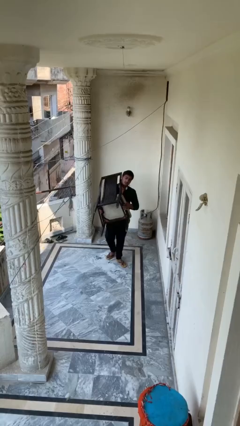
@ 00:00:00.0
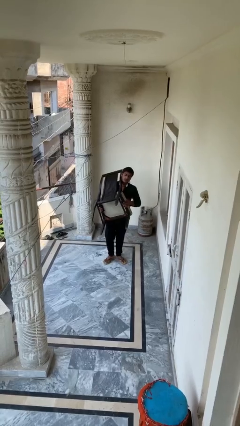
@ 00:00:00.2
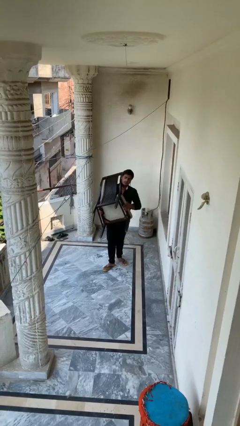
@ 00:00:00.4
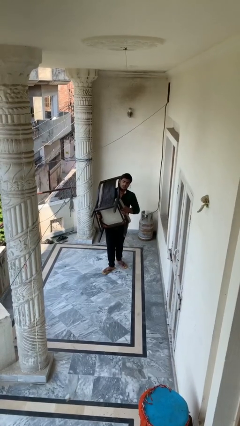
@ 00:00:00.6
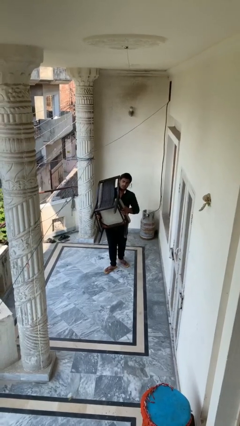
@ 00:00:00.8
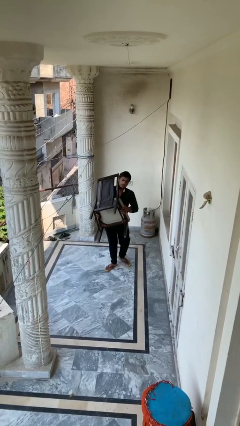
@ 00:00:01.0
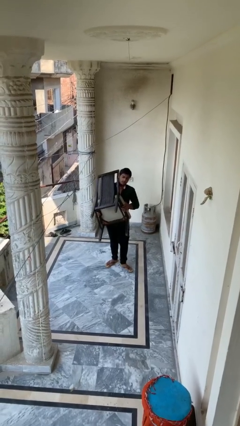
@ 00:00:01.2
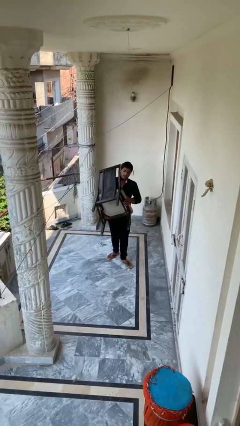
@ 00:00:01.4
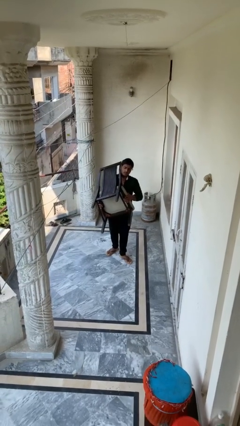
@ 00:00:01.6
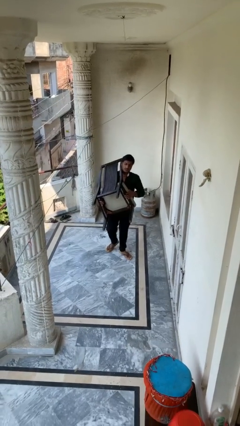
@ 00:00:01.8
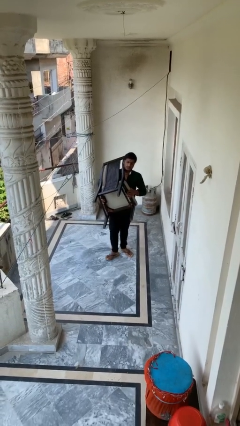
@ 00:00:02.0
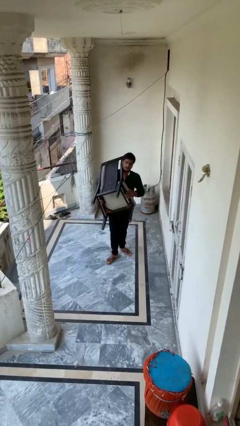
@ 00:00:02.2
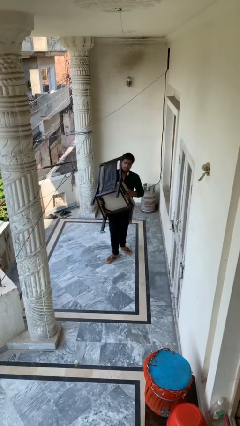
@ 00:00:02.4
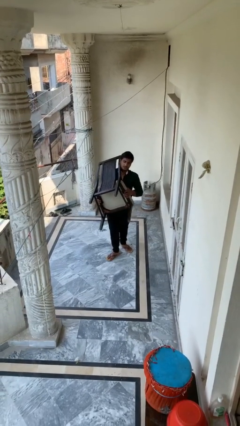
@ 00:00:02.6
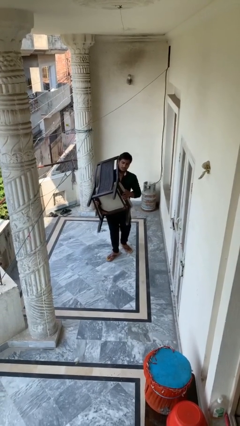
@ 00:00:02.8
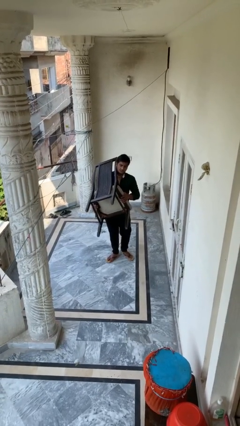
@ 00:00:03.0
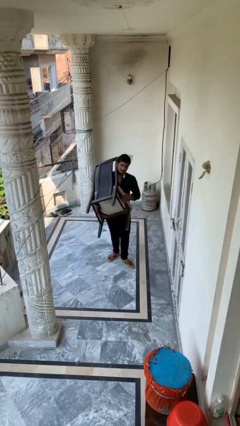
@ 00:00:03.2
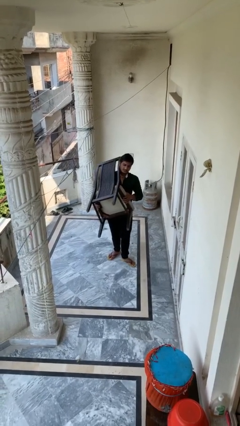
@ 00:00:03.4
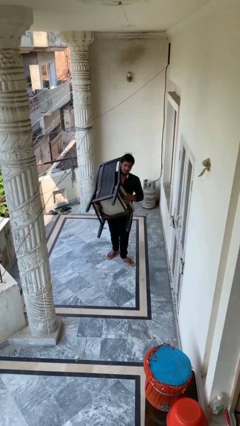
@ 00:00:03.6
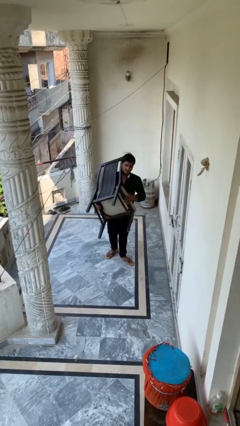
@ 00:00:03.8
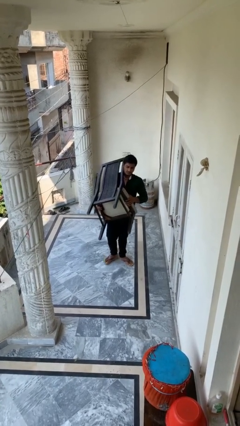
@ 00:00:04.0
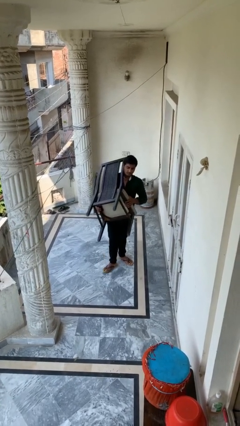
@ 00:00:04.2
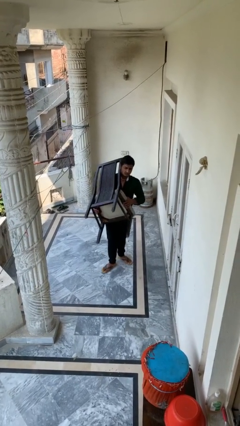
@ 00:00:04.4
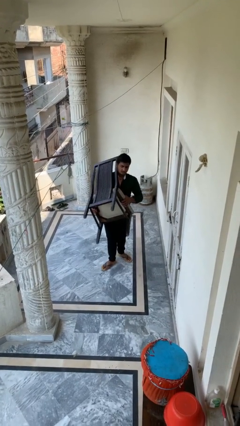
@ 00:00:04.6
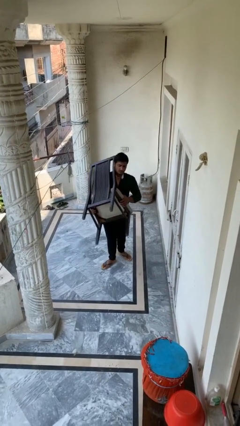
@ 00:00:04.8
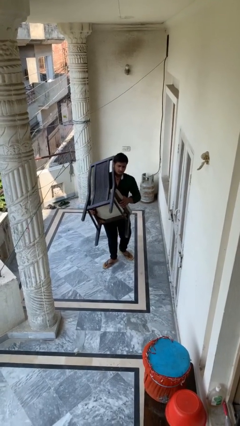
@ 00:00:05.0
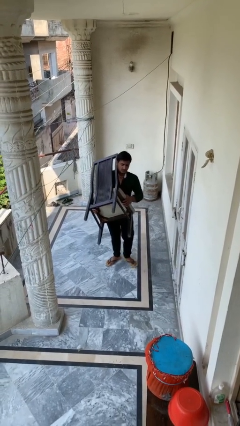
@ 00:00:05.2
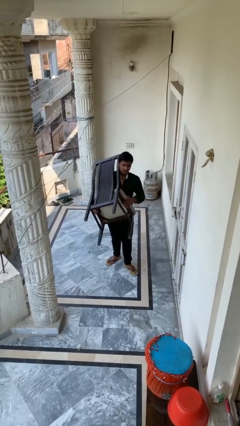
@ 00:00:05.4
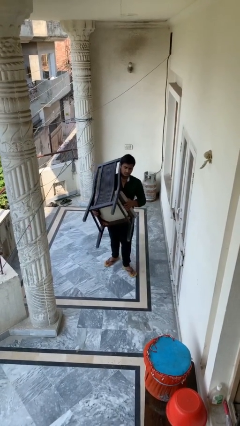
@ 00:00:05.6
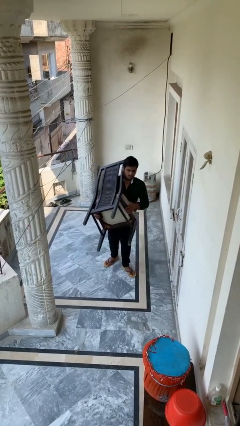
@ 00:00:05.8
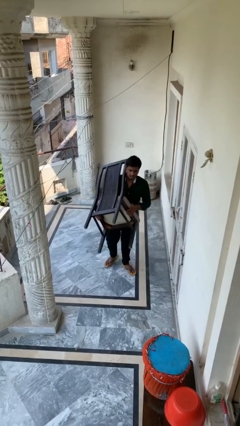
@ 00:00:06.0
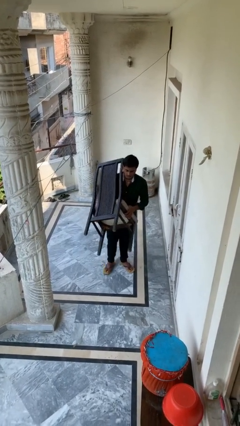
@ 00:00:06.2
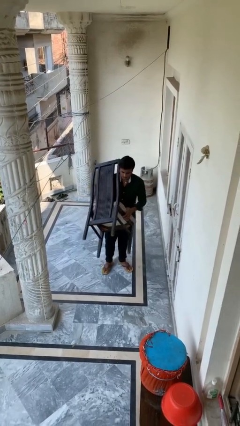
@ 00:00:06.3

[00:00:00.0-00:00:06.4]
person carries heavy object

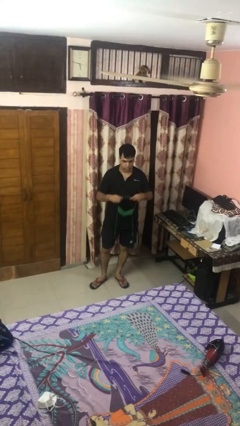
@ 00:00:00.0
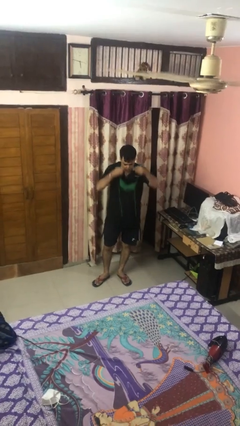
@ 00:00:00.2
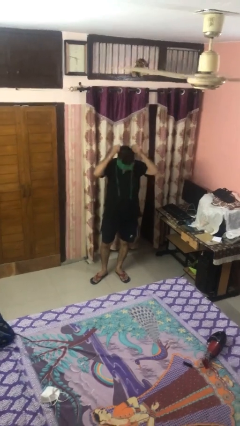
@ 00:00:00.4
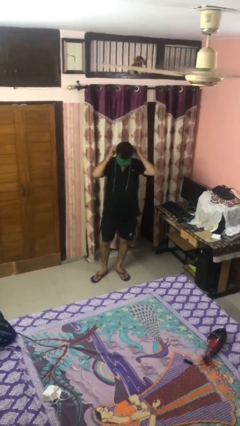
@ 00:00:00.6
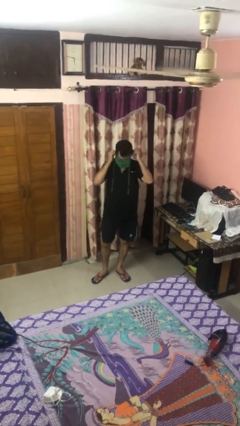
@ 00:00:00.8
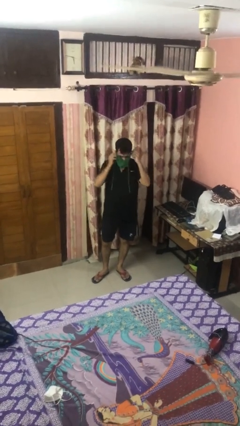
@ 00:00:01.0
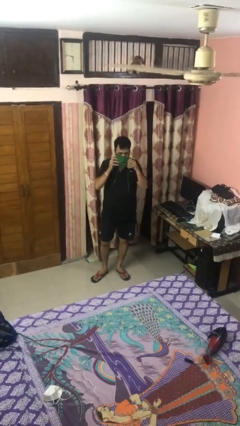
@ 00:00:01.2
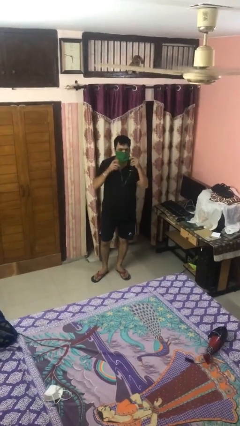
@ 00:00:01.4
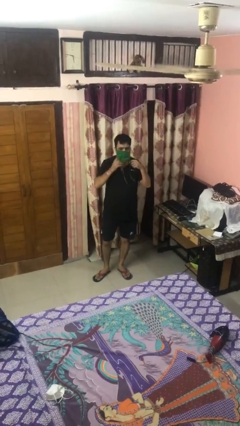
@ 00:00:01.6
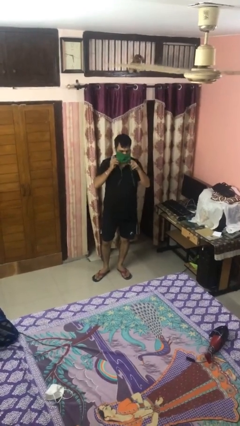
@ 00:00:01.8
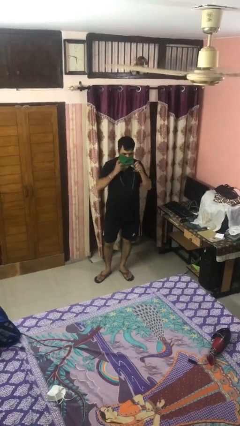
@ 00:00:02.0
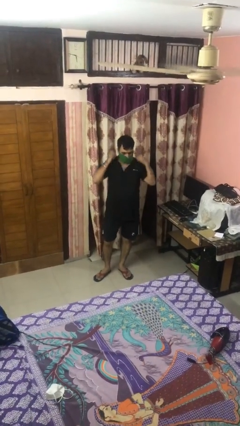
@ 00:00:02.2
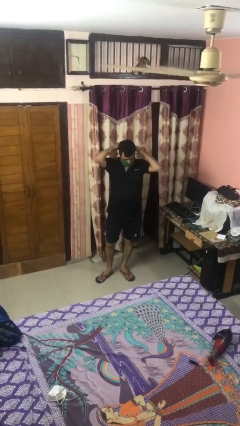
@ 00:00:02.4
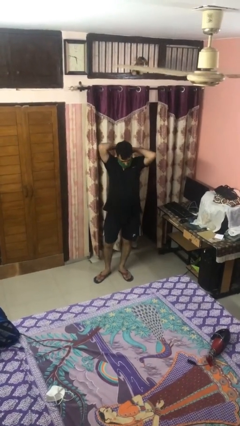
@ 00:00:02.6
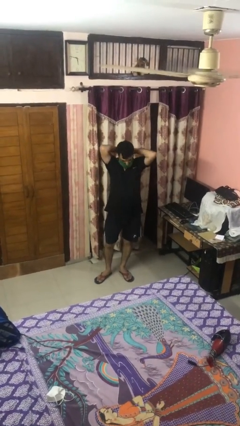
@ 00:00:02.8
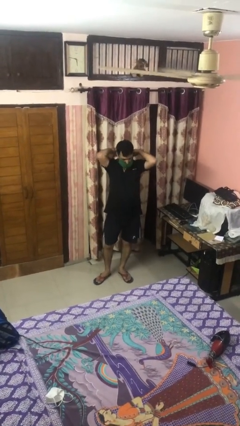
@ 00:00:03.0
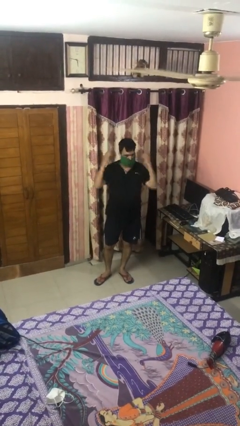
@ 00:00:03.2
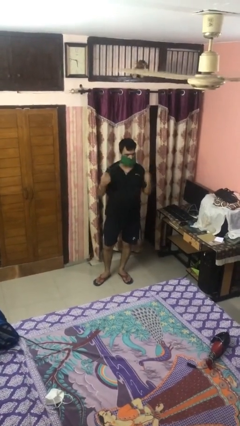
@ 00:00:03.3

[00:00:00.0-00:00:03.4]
person puts on facemask

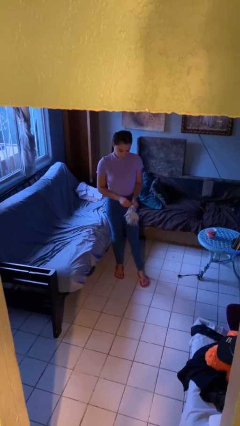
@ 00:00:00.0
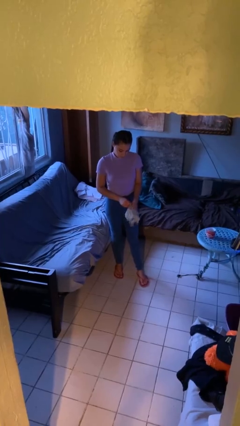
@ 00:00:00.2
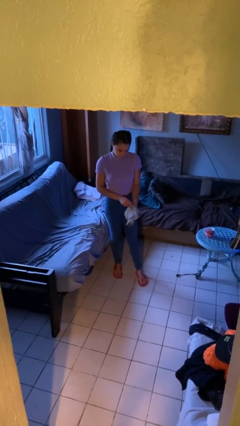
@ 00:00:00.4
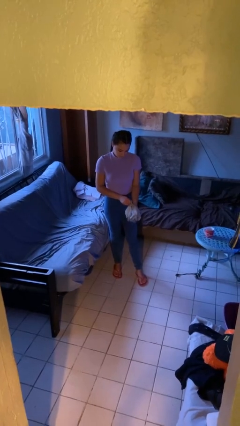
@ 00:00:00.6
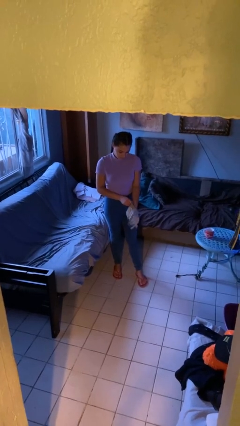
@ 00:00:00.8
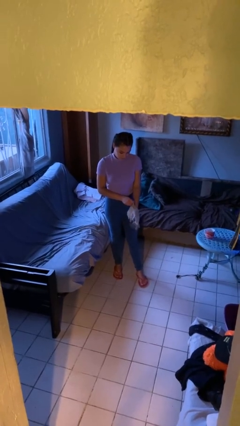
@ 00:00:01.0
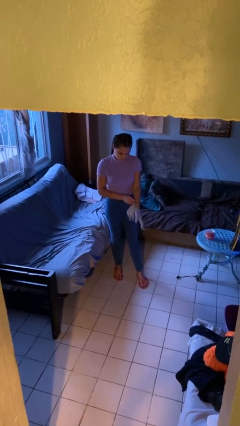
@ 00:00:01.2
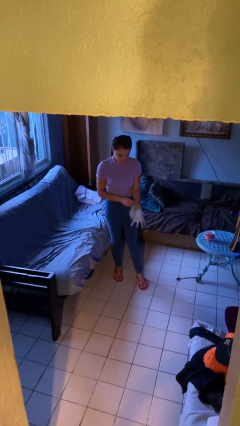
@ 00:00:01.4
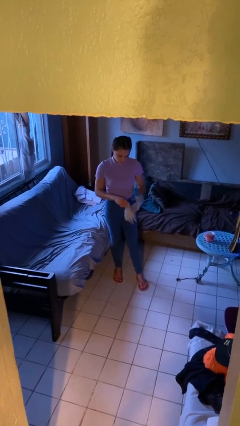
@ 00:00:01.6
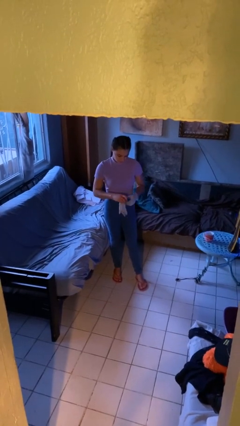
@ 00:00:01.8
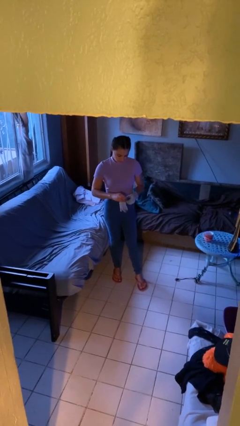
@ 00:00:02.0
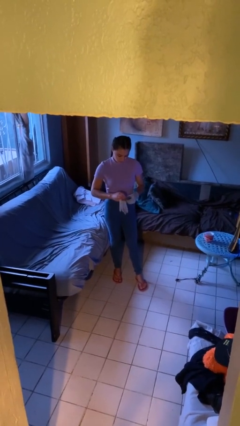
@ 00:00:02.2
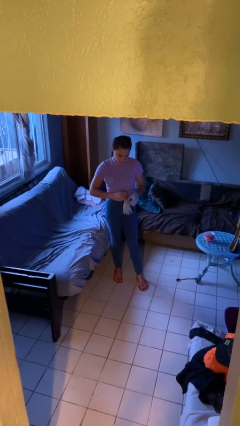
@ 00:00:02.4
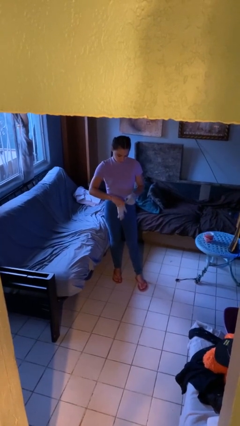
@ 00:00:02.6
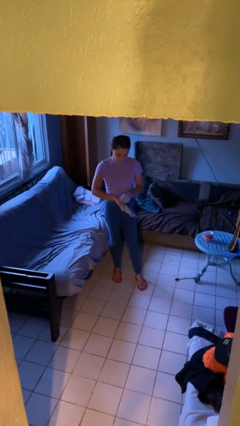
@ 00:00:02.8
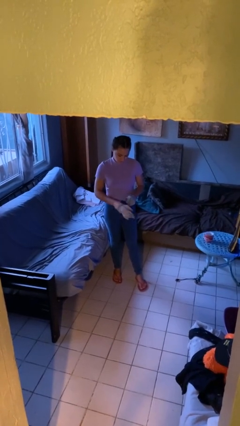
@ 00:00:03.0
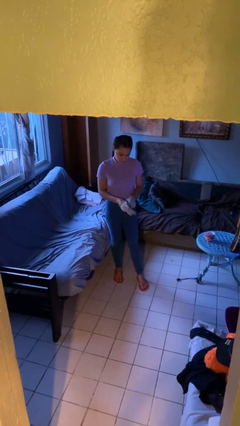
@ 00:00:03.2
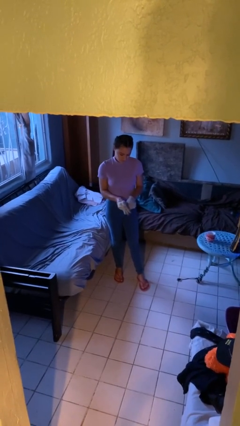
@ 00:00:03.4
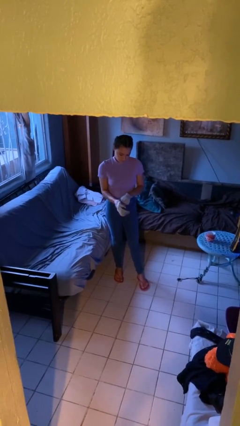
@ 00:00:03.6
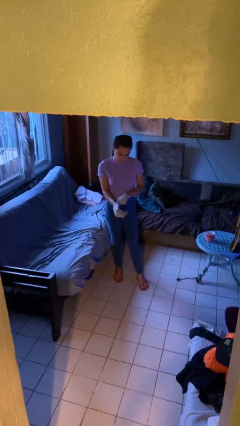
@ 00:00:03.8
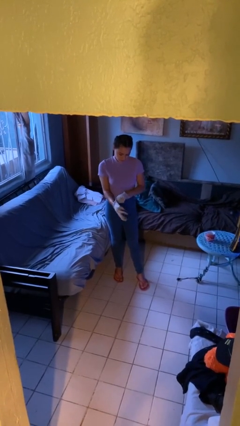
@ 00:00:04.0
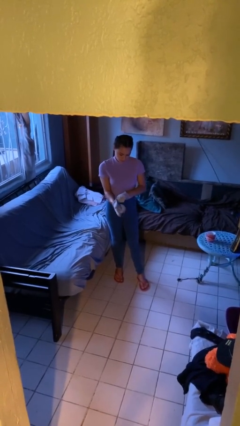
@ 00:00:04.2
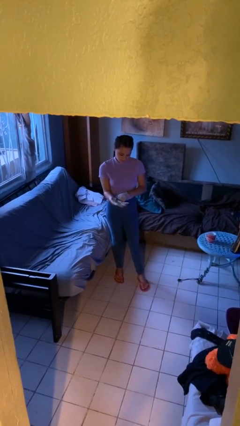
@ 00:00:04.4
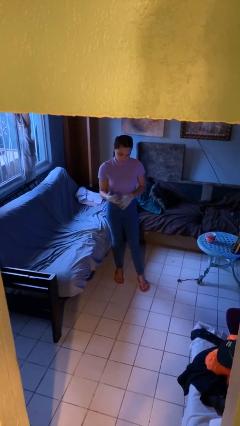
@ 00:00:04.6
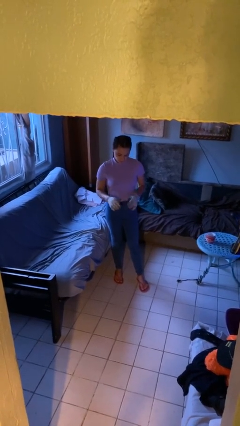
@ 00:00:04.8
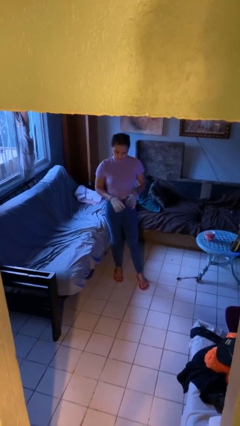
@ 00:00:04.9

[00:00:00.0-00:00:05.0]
person puts on gloves

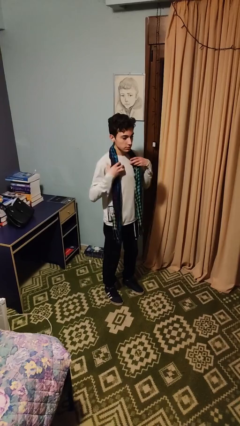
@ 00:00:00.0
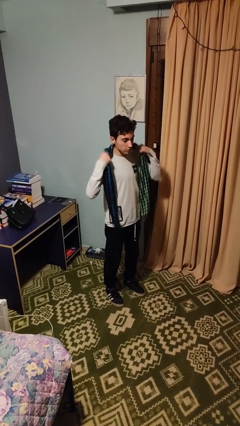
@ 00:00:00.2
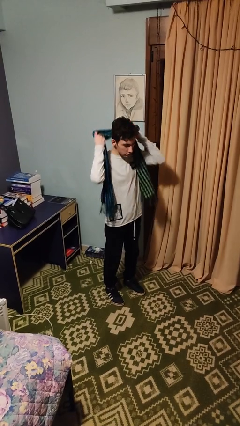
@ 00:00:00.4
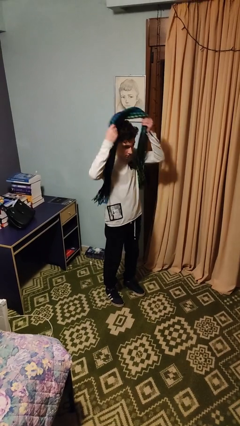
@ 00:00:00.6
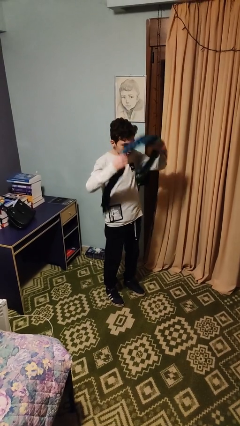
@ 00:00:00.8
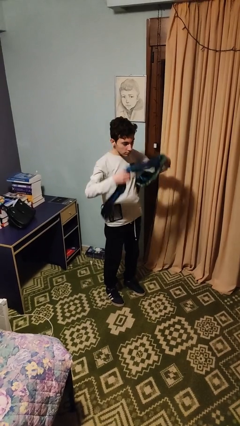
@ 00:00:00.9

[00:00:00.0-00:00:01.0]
person takes off scarf

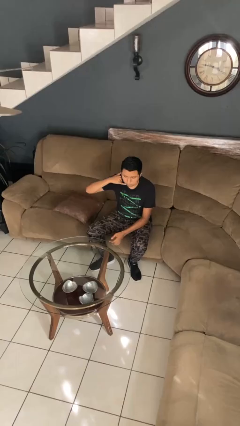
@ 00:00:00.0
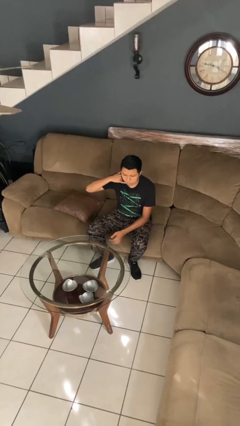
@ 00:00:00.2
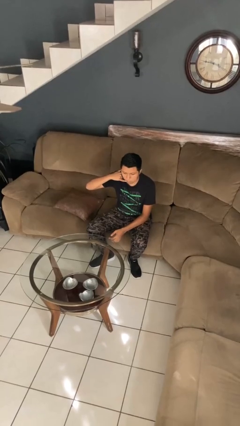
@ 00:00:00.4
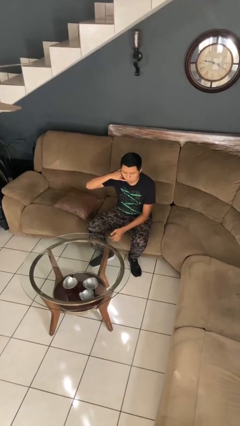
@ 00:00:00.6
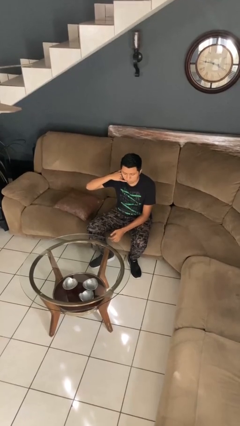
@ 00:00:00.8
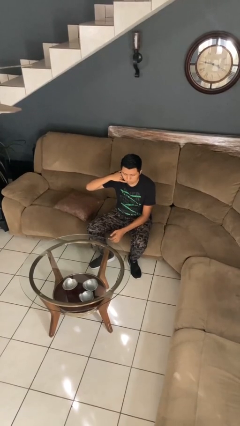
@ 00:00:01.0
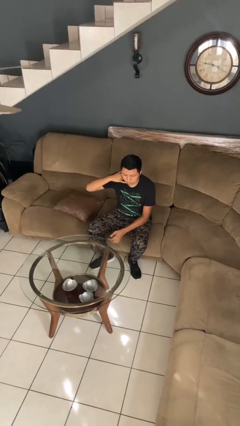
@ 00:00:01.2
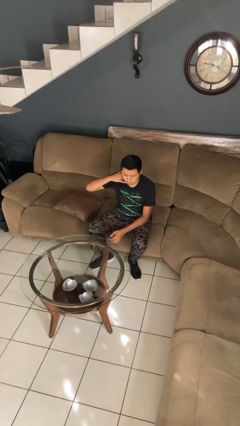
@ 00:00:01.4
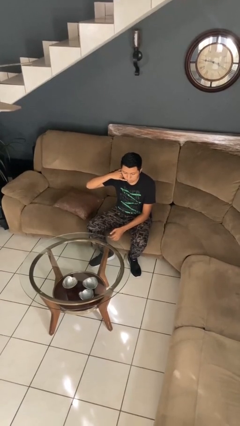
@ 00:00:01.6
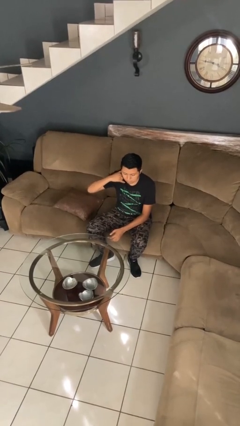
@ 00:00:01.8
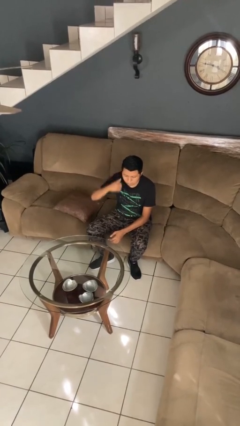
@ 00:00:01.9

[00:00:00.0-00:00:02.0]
person gestures call me
